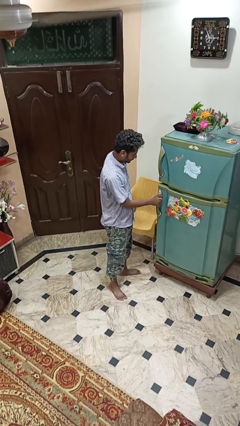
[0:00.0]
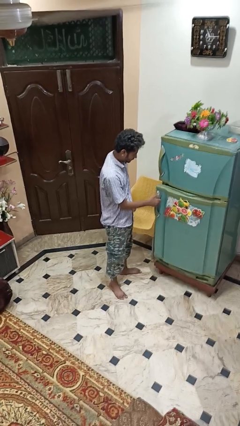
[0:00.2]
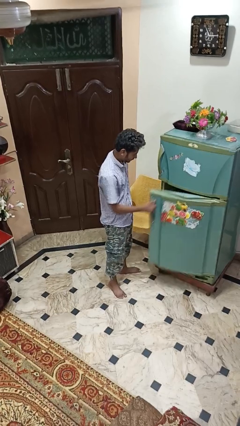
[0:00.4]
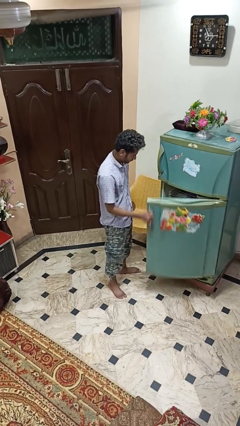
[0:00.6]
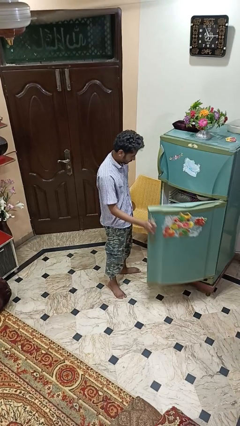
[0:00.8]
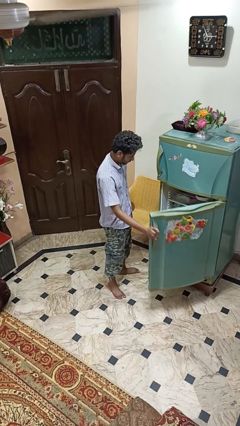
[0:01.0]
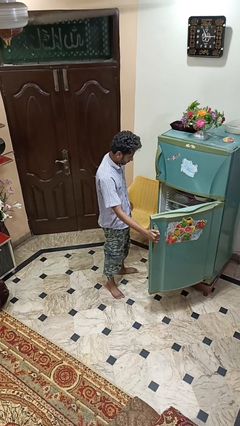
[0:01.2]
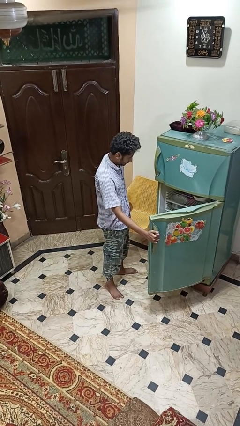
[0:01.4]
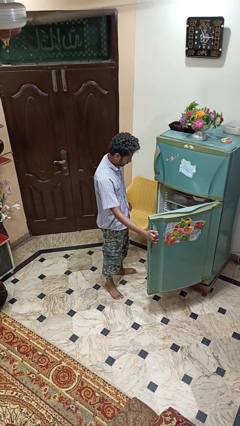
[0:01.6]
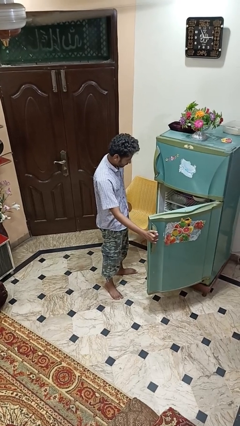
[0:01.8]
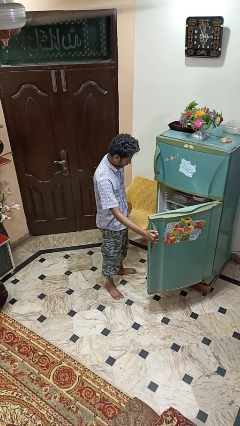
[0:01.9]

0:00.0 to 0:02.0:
person opens refrigerator

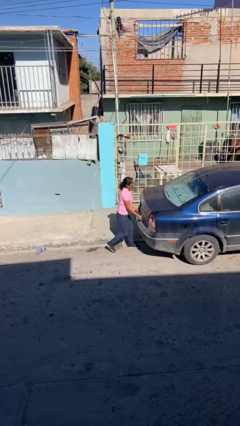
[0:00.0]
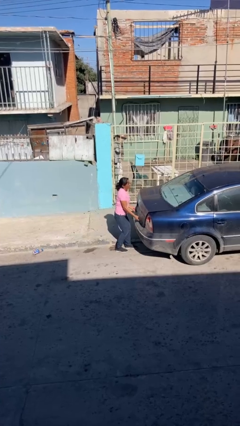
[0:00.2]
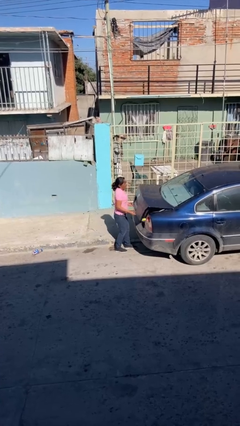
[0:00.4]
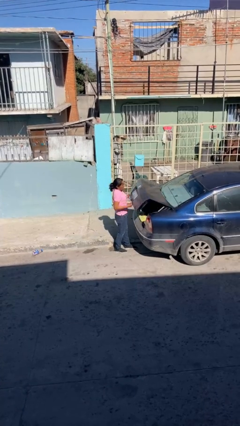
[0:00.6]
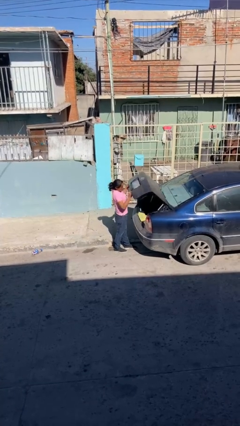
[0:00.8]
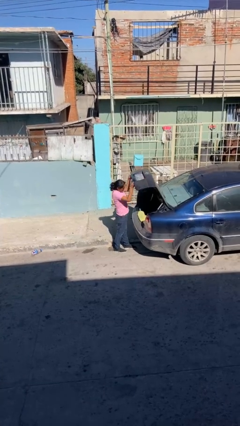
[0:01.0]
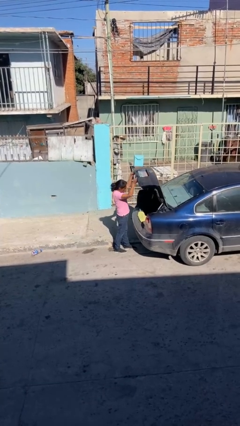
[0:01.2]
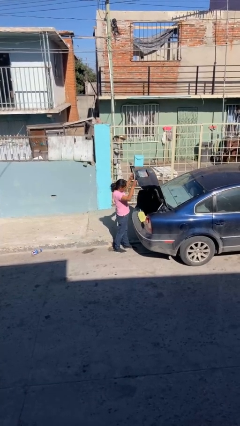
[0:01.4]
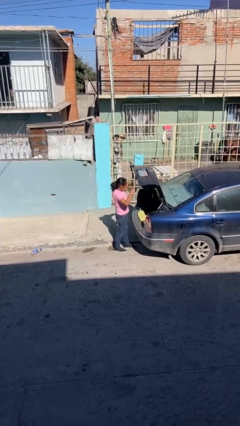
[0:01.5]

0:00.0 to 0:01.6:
person opens car trunk

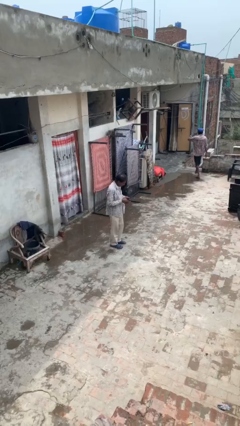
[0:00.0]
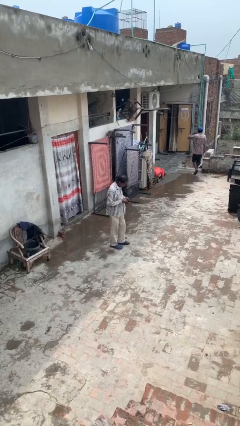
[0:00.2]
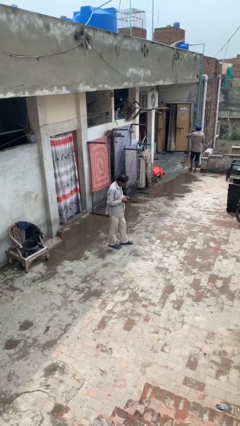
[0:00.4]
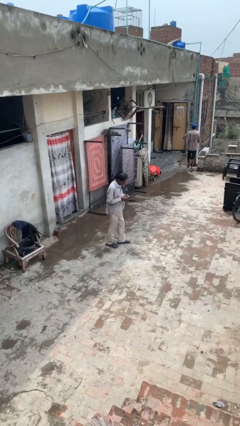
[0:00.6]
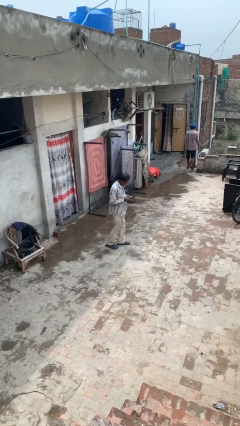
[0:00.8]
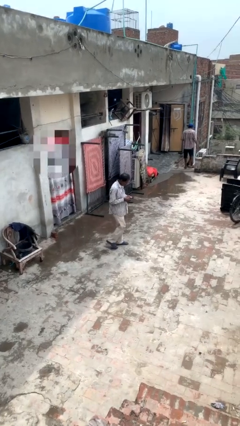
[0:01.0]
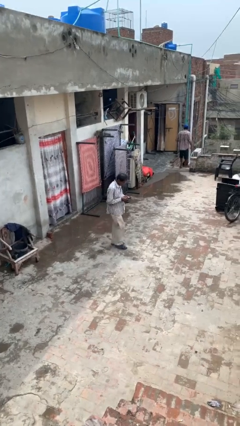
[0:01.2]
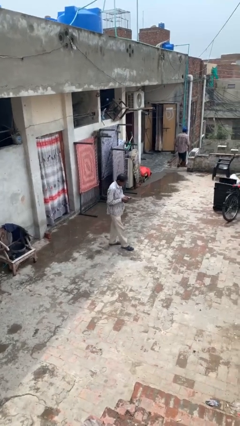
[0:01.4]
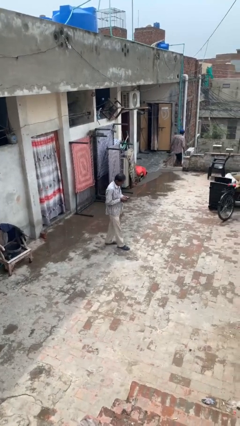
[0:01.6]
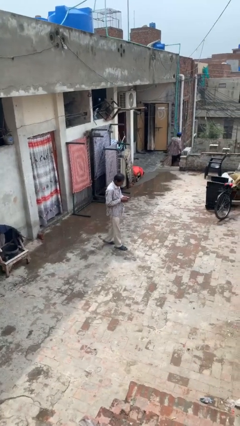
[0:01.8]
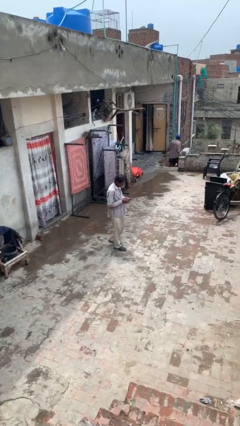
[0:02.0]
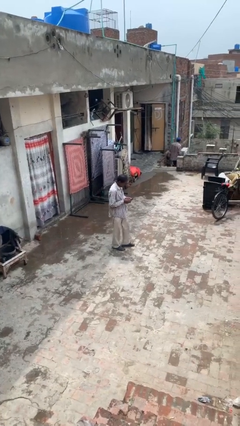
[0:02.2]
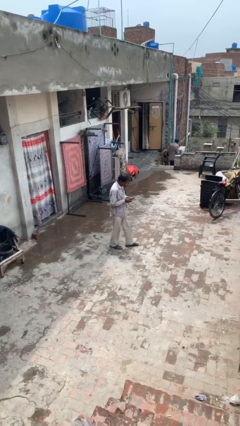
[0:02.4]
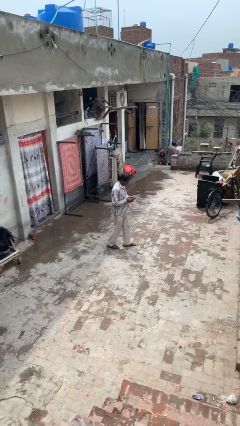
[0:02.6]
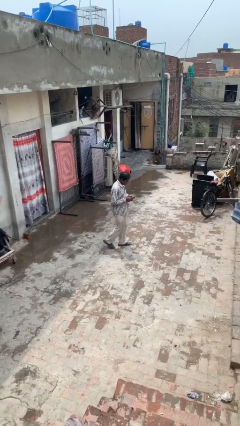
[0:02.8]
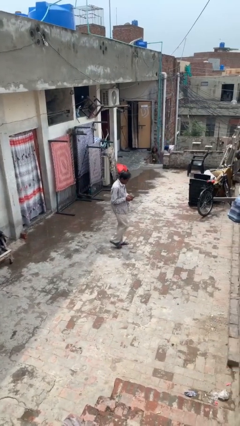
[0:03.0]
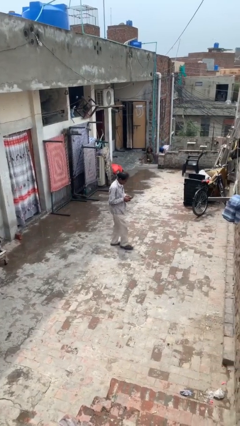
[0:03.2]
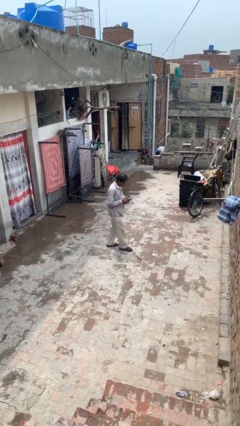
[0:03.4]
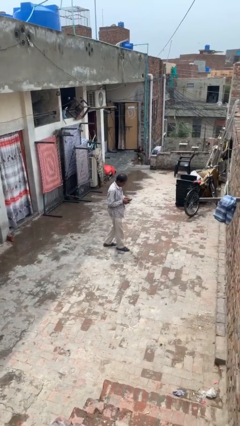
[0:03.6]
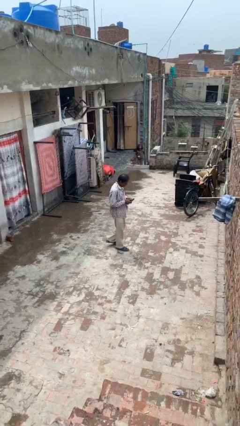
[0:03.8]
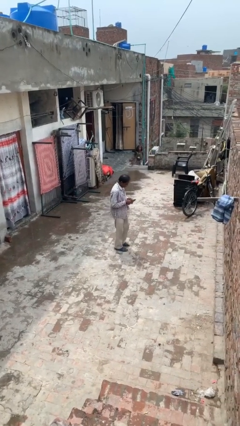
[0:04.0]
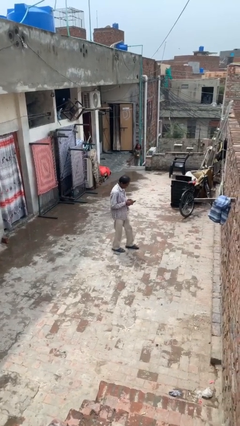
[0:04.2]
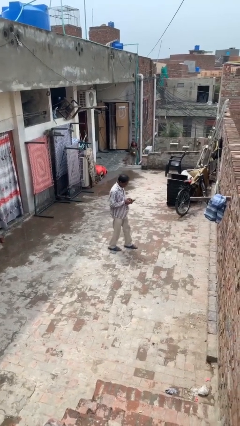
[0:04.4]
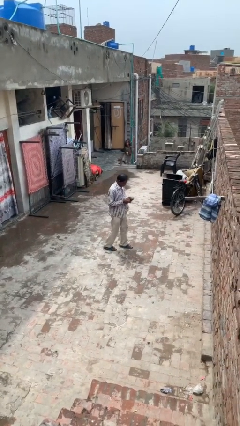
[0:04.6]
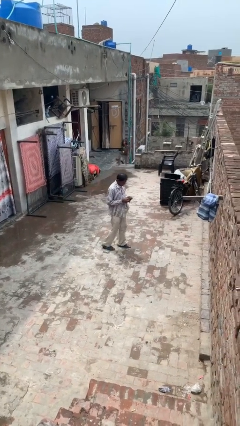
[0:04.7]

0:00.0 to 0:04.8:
person texts on phone

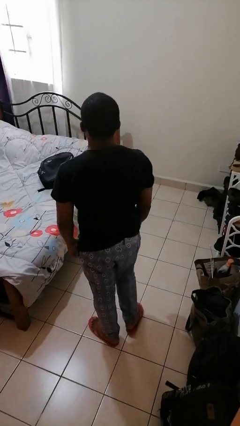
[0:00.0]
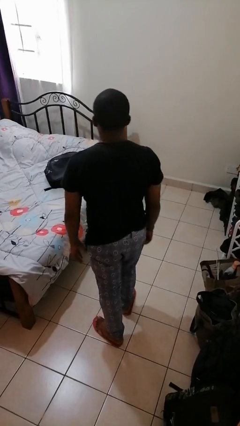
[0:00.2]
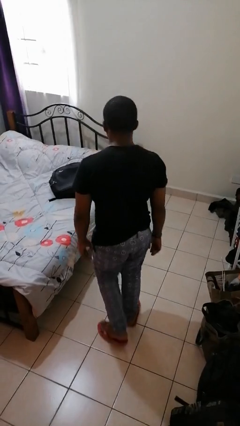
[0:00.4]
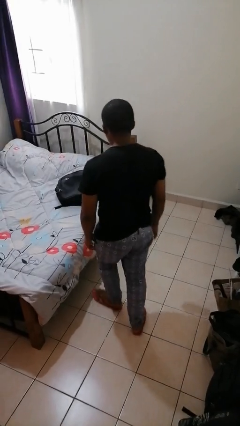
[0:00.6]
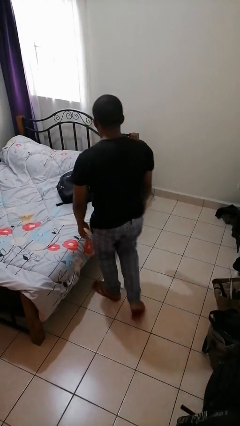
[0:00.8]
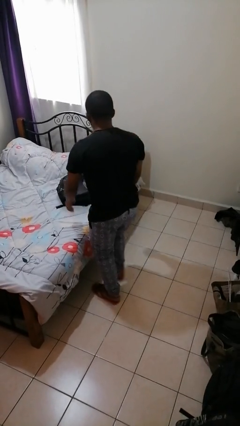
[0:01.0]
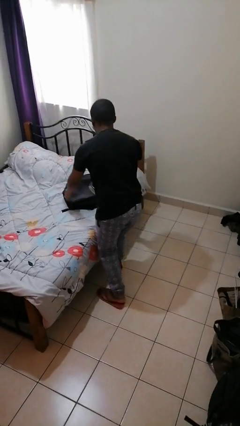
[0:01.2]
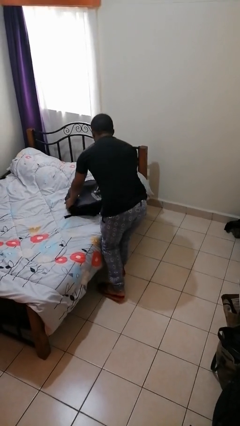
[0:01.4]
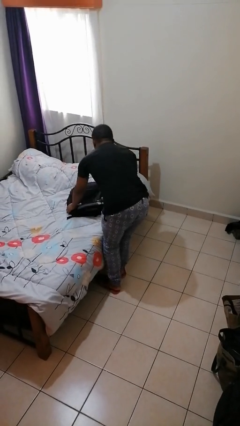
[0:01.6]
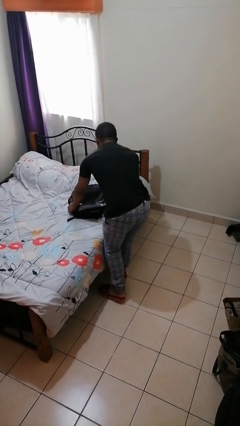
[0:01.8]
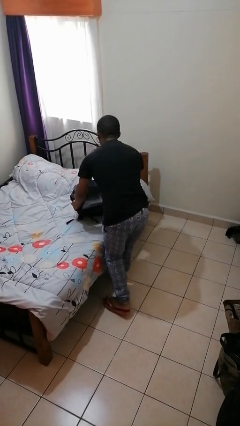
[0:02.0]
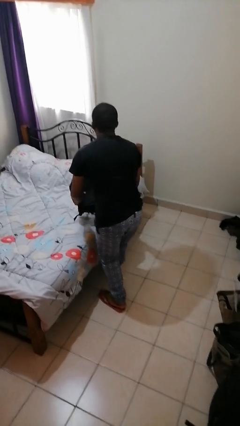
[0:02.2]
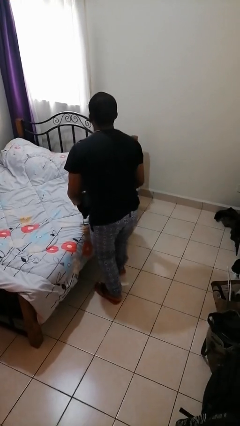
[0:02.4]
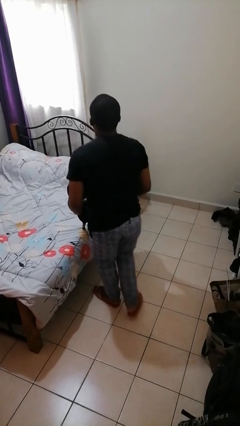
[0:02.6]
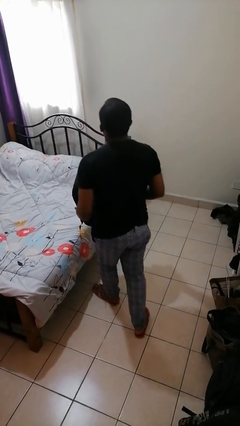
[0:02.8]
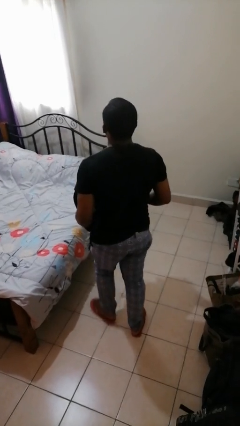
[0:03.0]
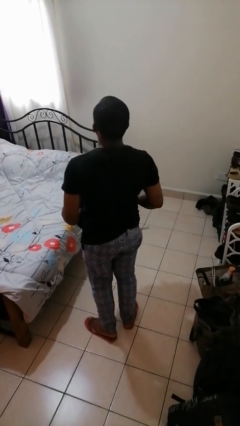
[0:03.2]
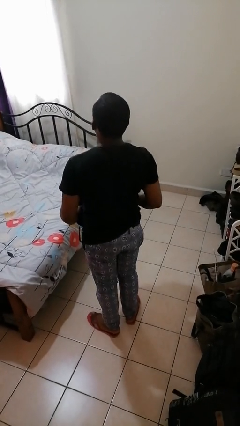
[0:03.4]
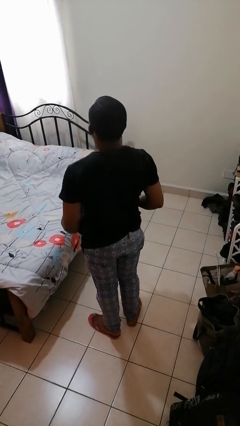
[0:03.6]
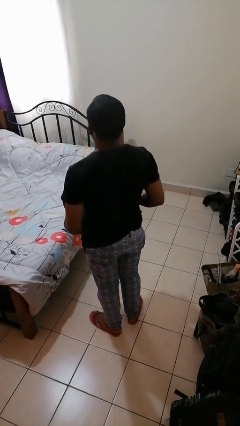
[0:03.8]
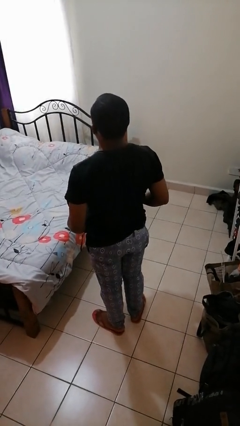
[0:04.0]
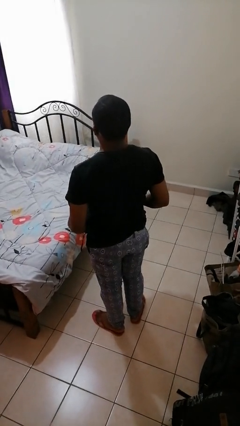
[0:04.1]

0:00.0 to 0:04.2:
person picks up object from bed

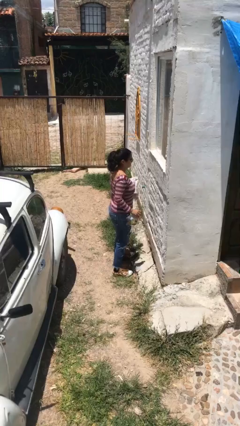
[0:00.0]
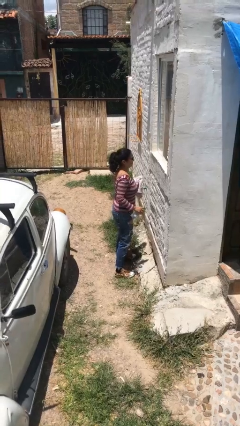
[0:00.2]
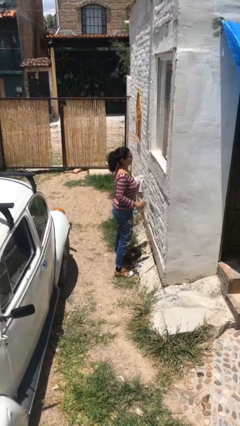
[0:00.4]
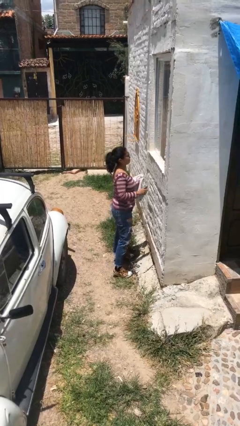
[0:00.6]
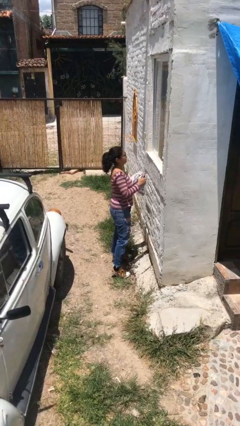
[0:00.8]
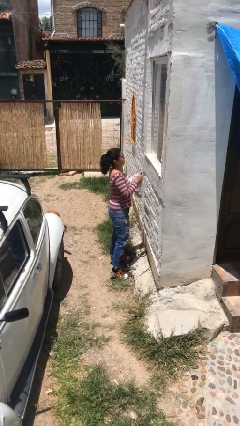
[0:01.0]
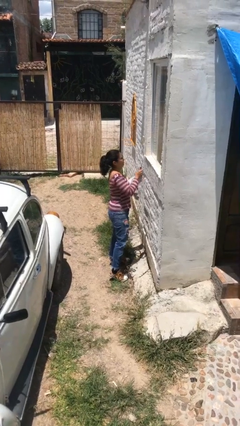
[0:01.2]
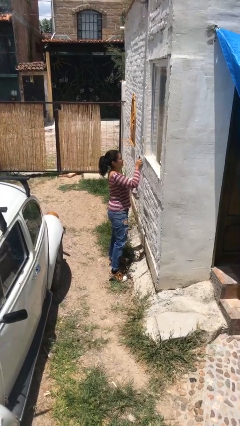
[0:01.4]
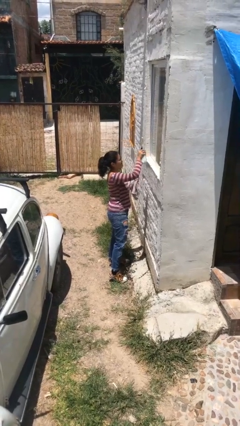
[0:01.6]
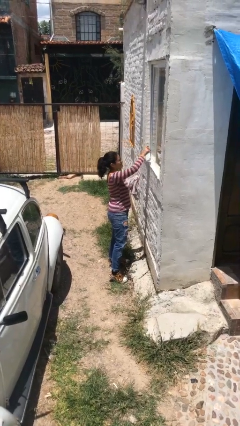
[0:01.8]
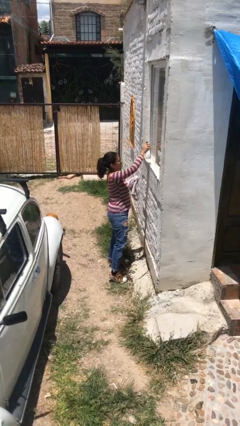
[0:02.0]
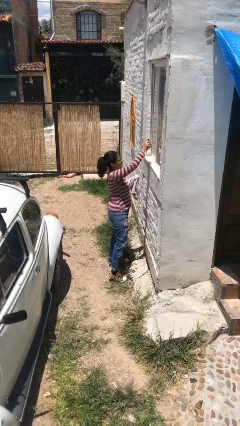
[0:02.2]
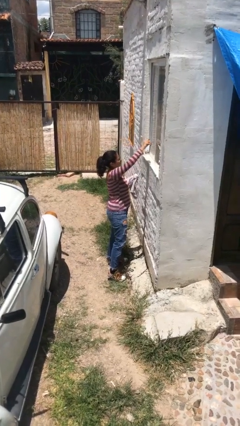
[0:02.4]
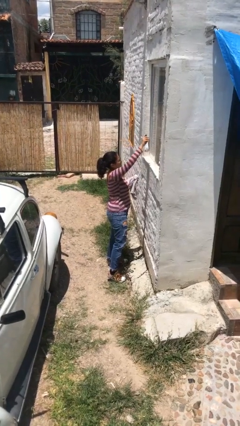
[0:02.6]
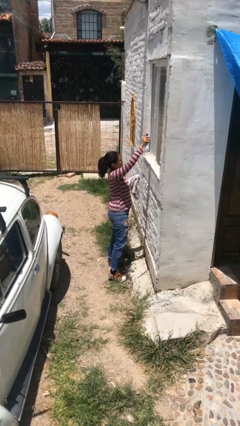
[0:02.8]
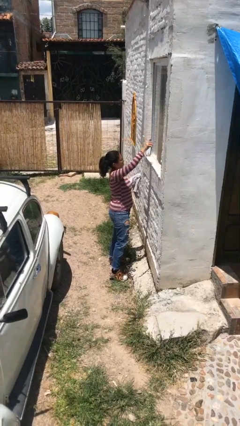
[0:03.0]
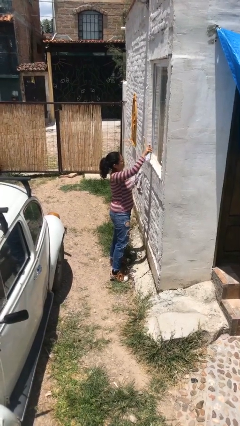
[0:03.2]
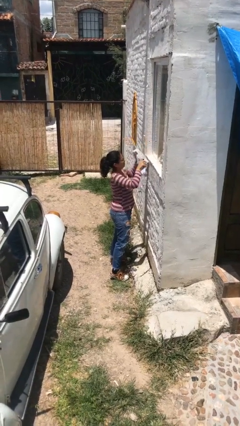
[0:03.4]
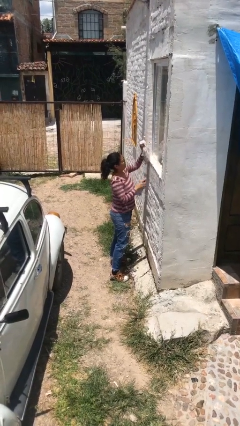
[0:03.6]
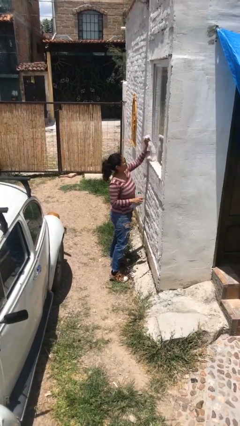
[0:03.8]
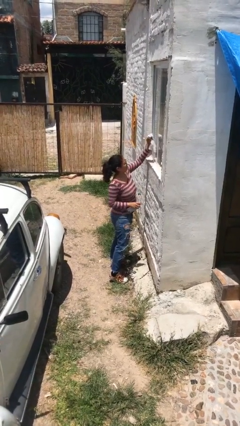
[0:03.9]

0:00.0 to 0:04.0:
person sprays from bottle

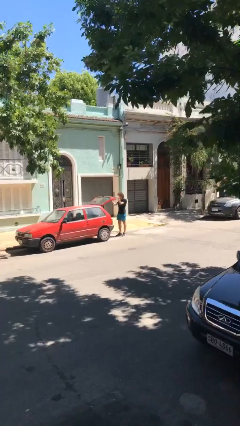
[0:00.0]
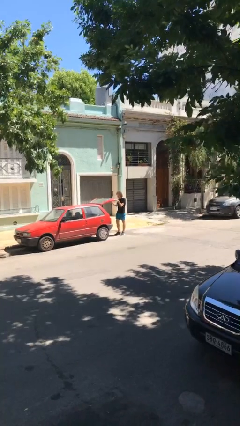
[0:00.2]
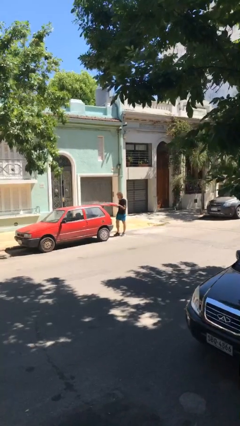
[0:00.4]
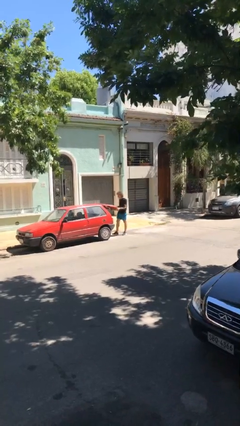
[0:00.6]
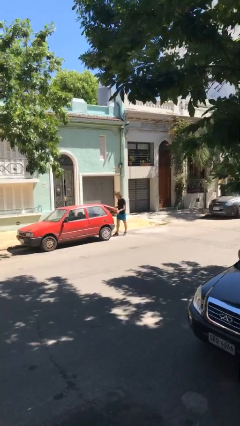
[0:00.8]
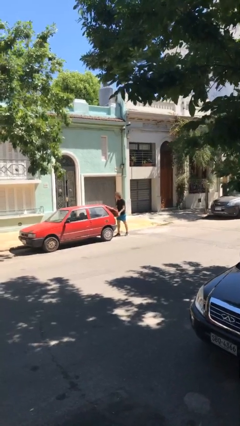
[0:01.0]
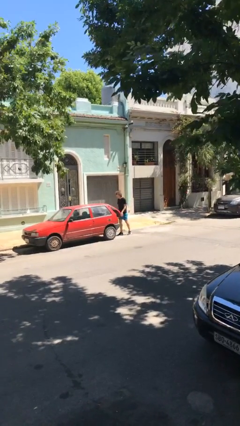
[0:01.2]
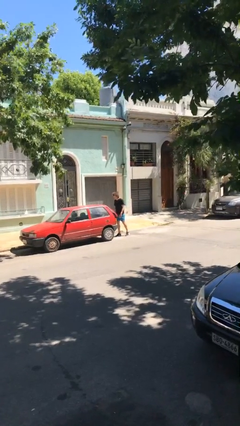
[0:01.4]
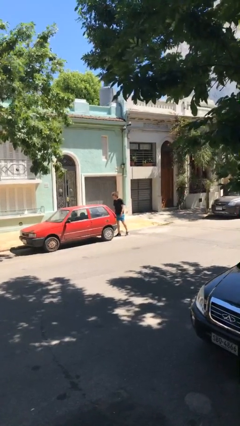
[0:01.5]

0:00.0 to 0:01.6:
person closes car trunk
